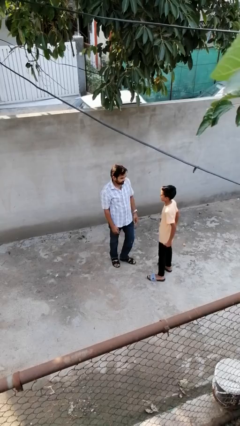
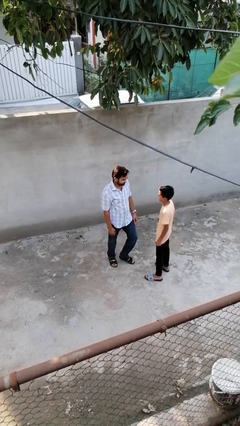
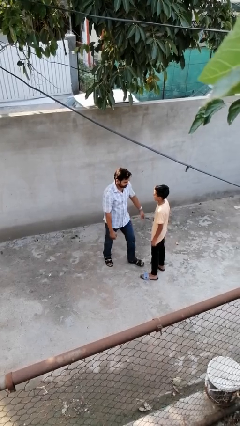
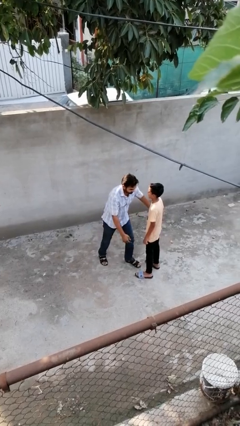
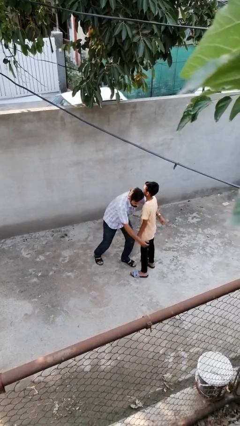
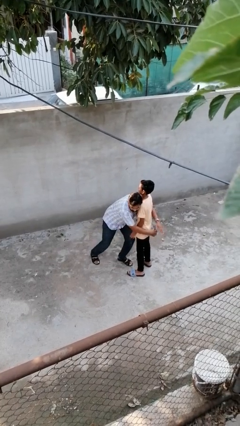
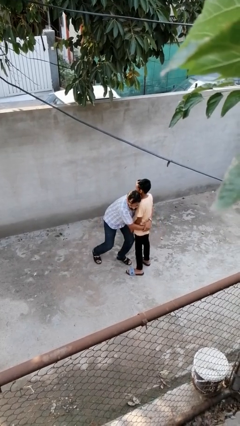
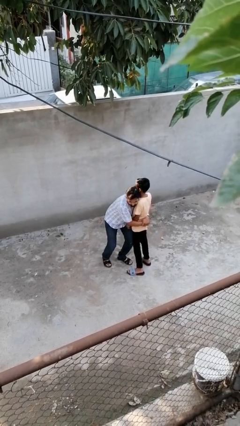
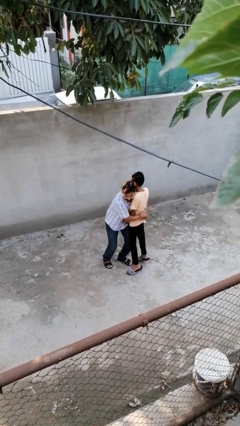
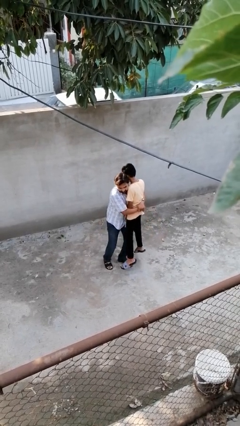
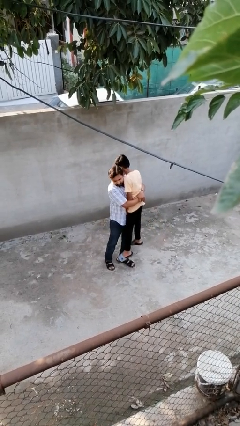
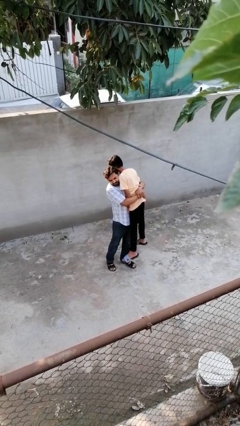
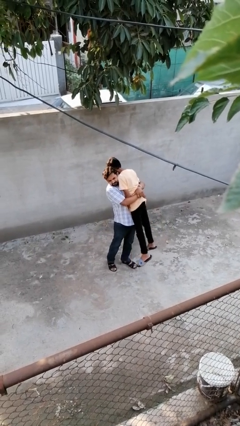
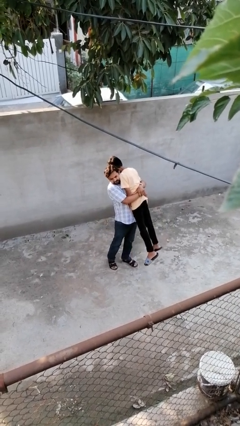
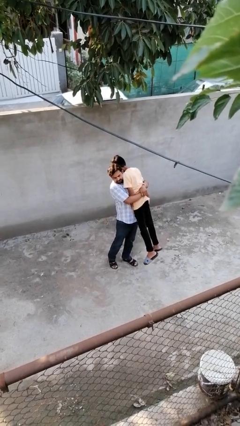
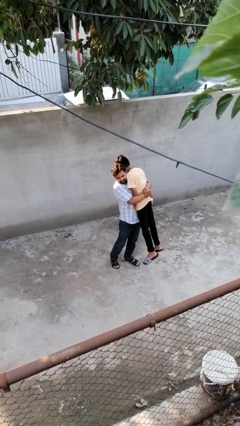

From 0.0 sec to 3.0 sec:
person picks up person

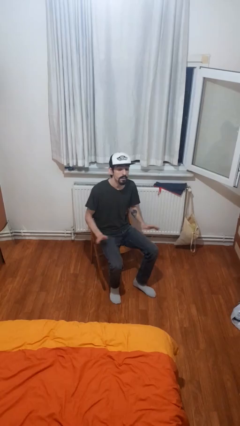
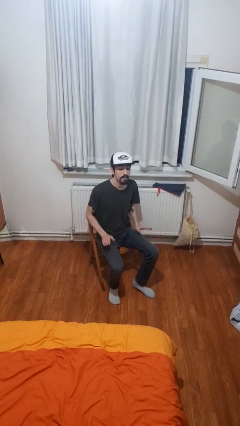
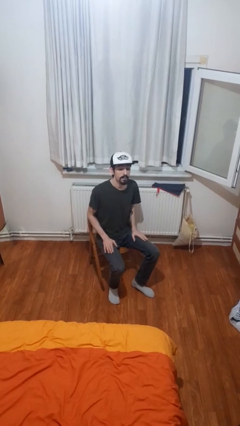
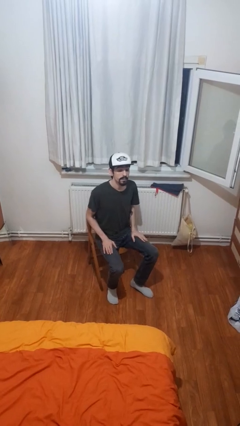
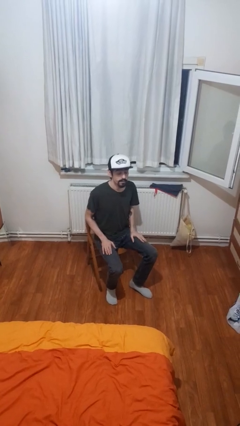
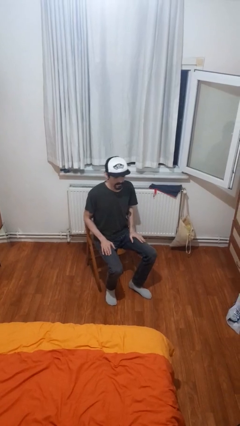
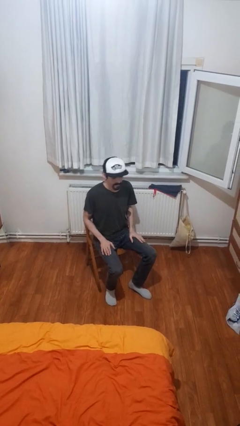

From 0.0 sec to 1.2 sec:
person slaps hands on thighs

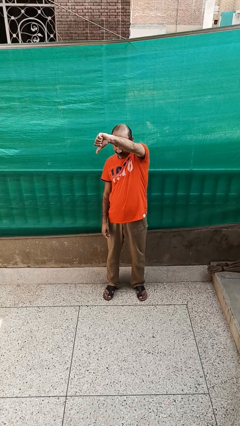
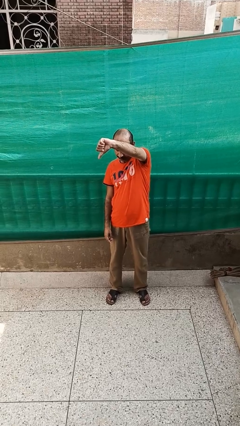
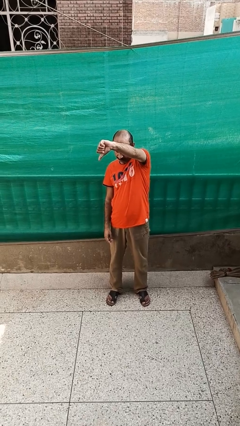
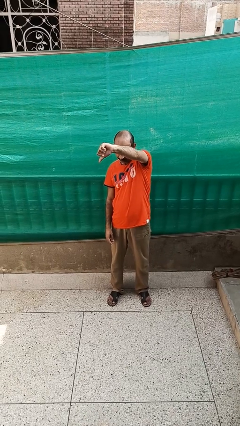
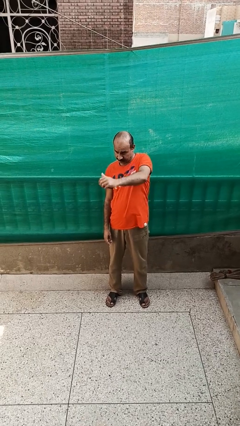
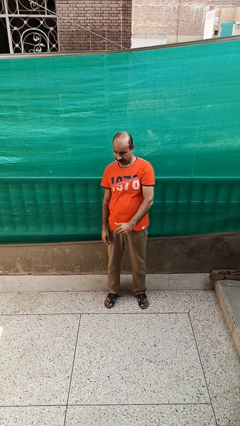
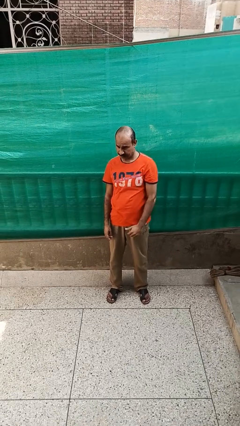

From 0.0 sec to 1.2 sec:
person gestures thumbs down

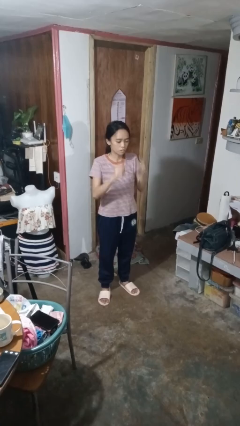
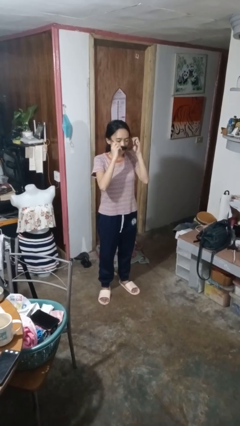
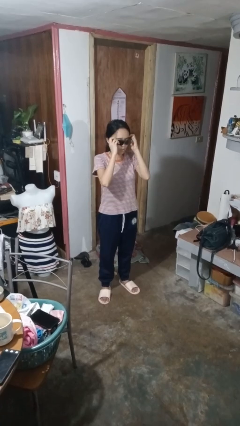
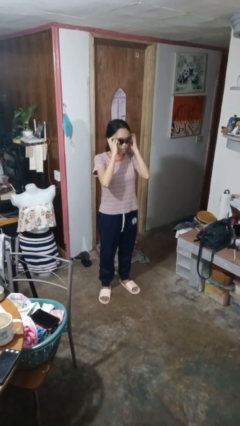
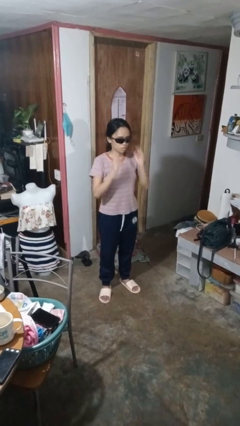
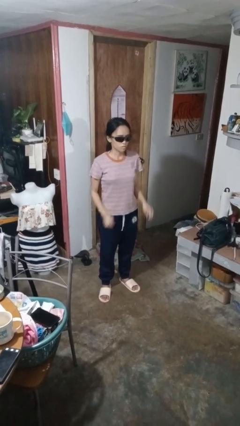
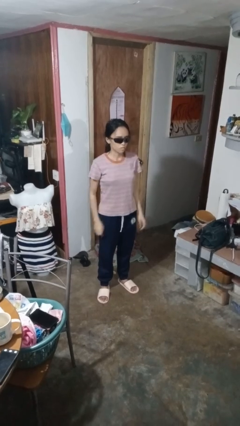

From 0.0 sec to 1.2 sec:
person puts on sunglasses

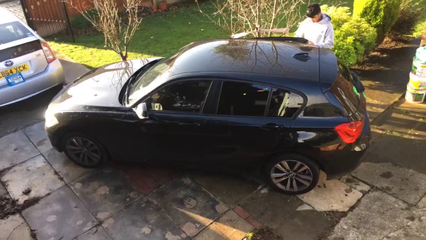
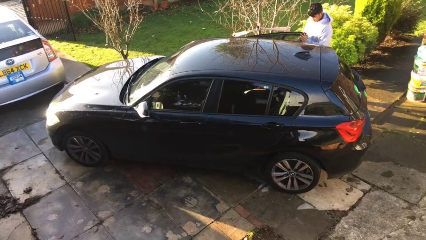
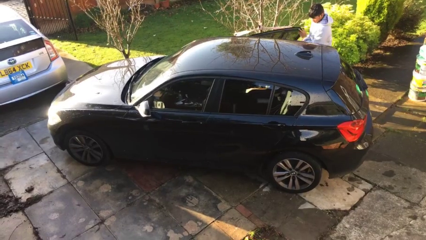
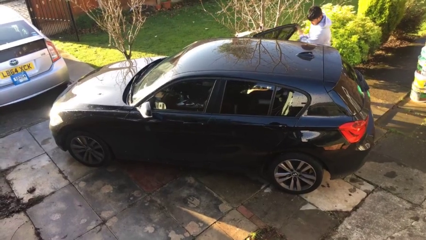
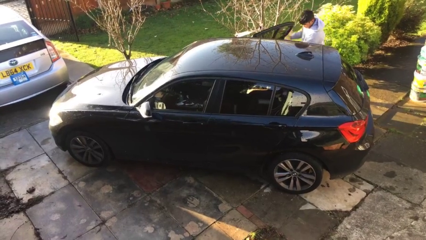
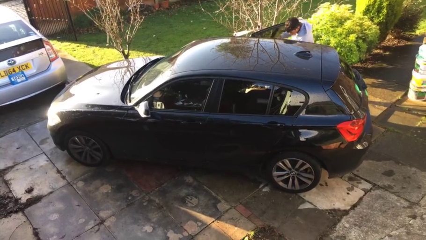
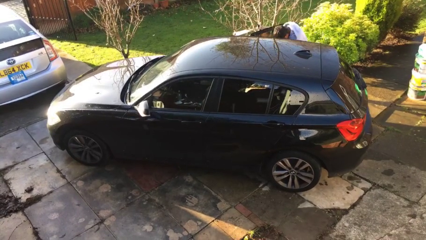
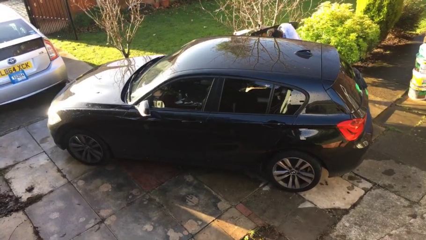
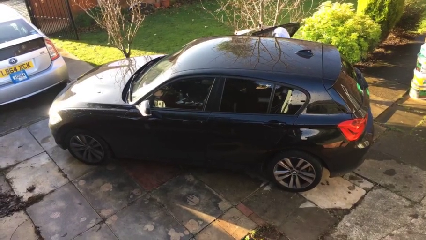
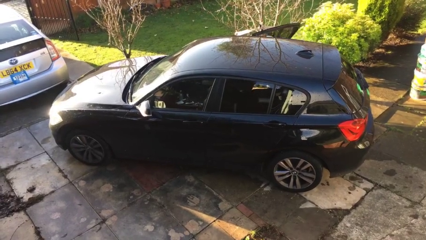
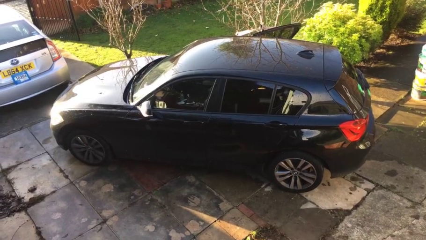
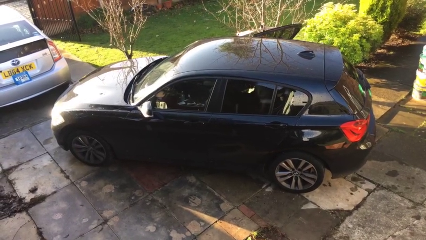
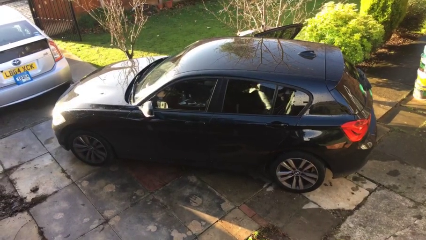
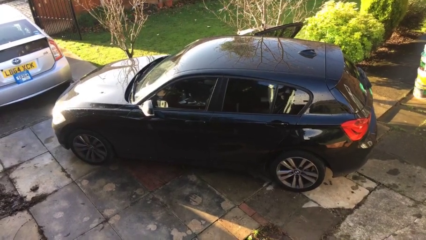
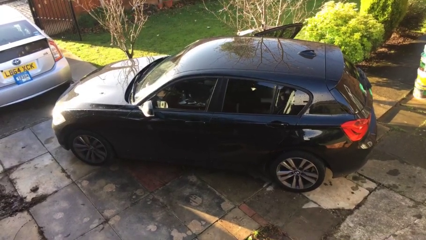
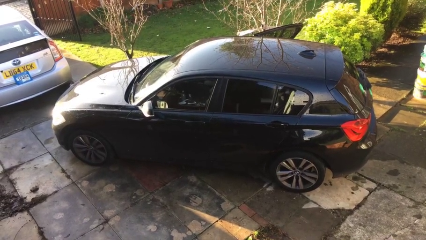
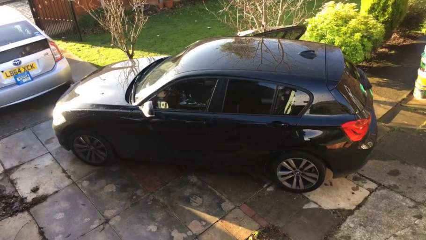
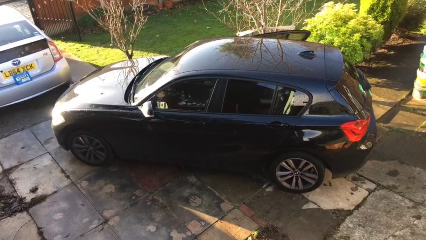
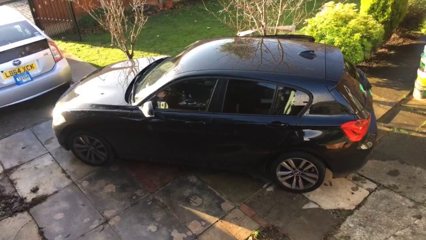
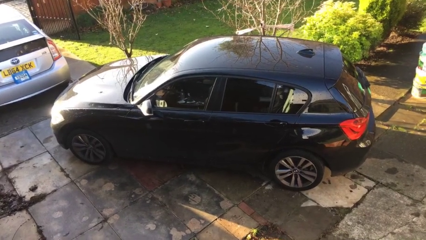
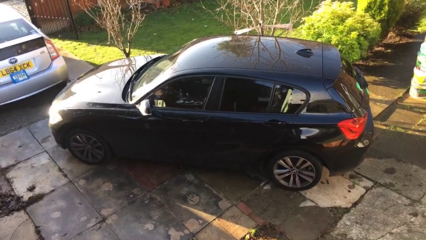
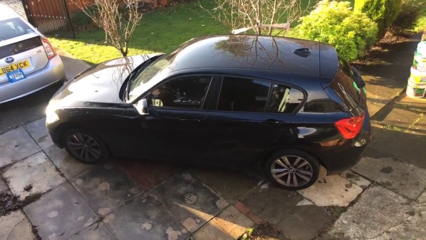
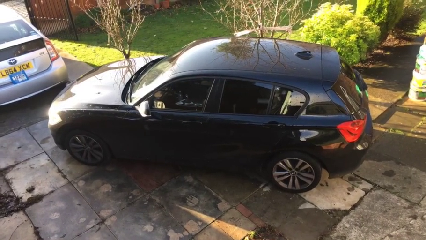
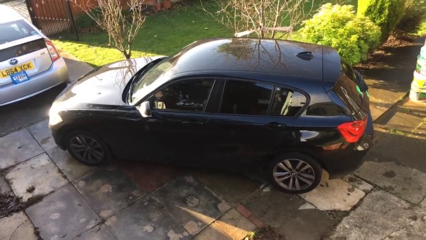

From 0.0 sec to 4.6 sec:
car picks up person

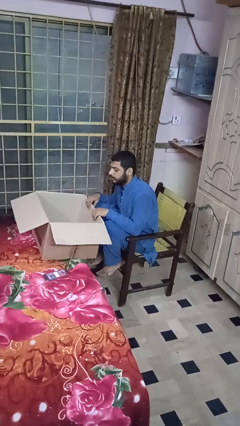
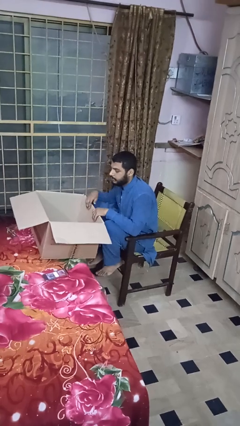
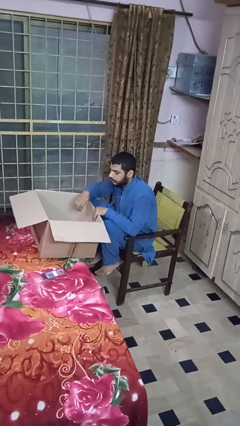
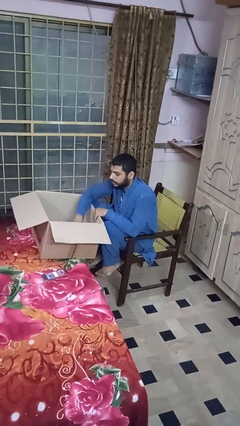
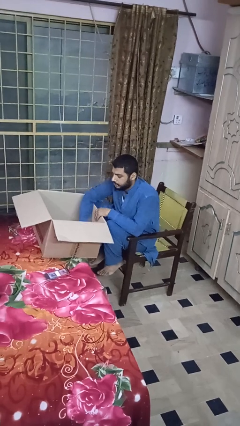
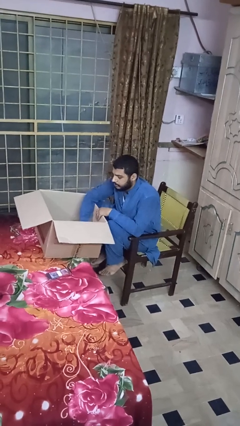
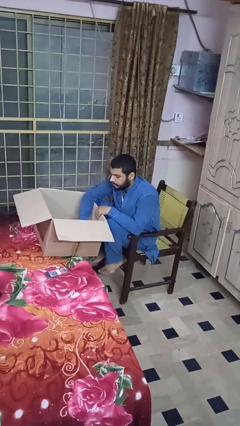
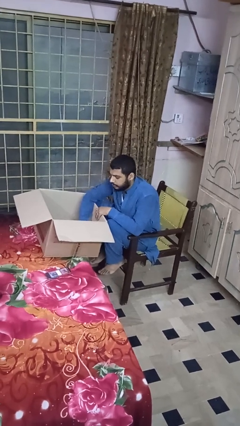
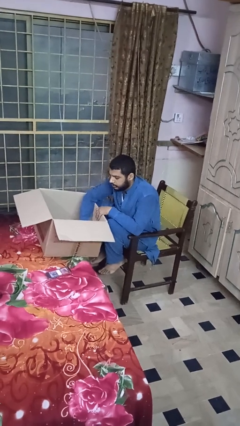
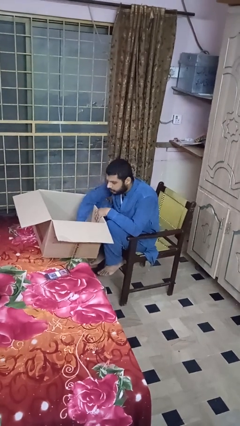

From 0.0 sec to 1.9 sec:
person searches in box

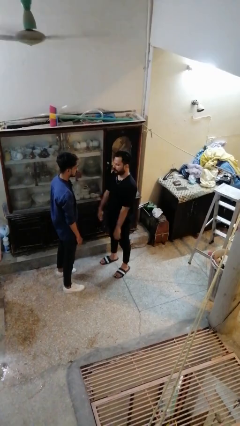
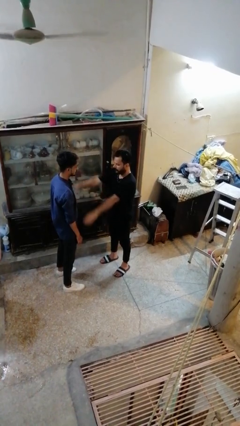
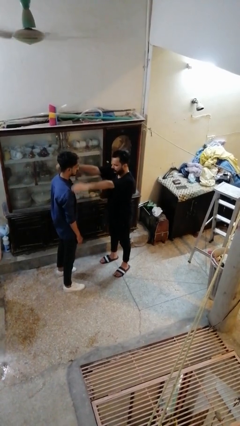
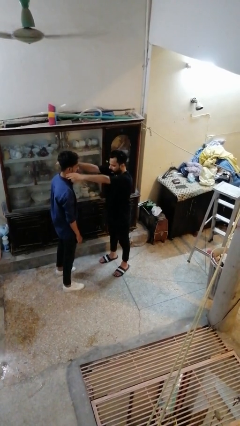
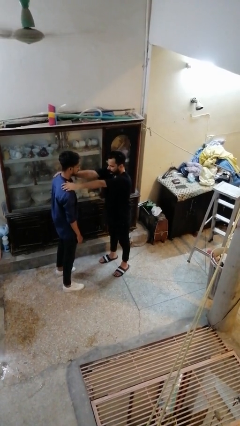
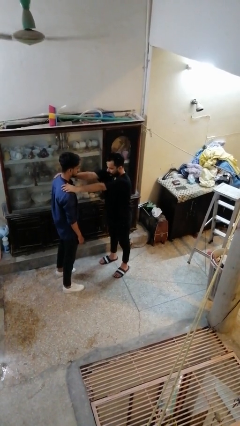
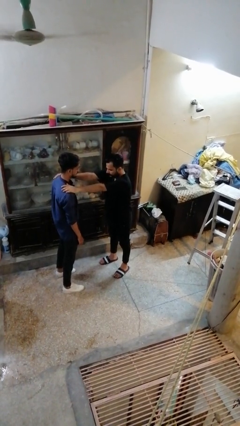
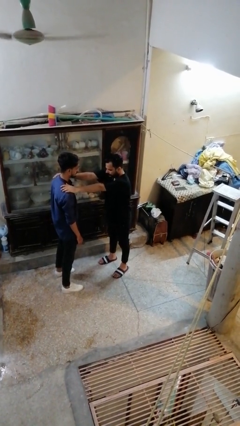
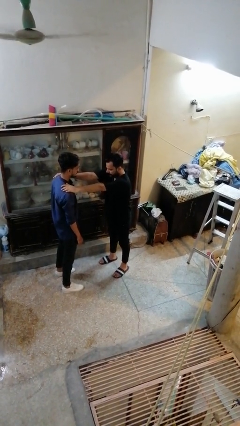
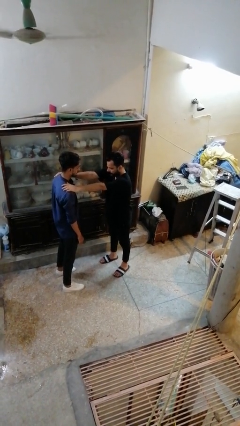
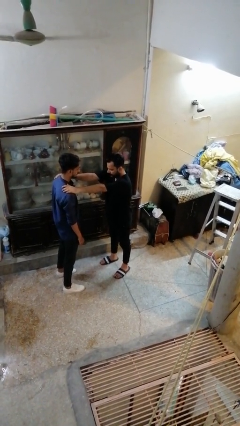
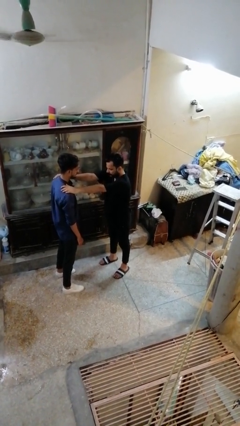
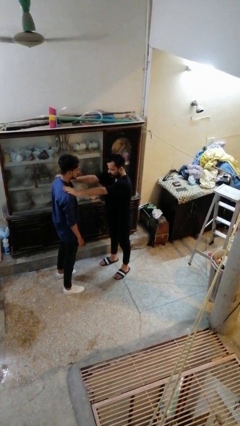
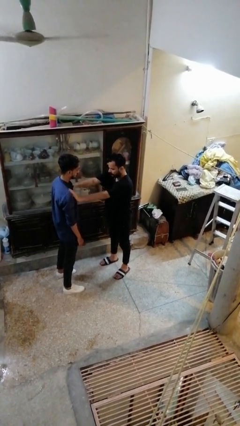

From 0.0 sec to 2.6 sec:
person pounds shoulders of person

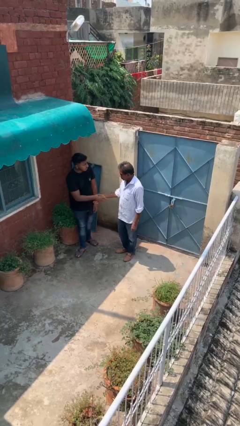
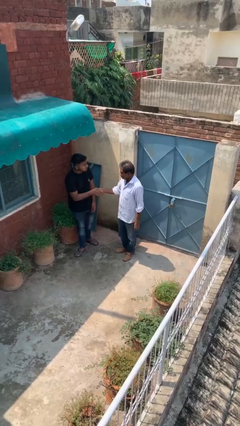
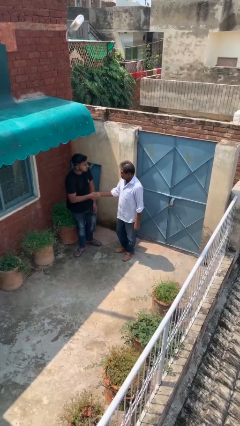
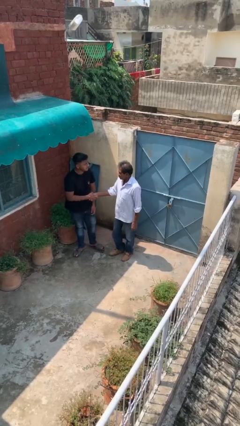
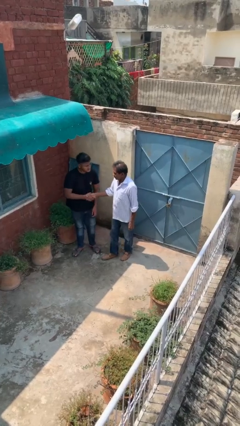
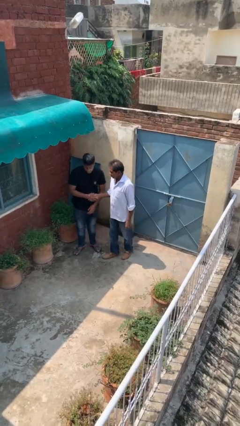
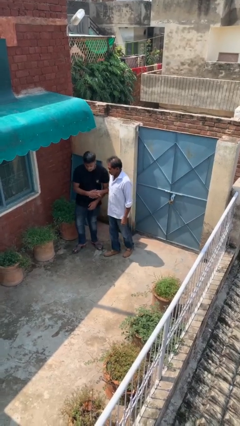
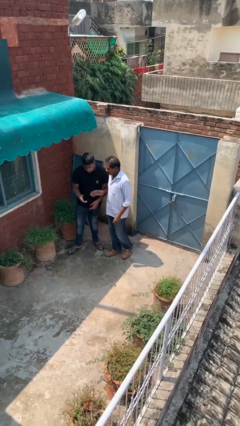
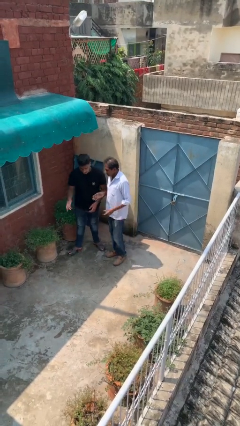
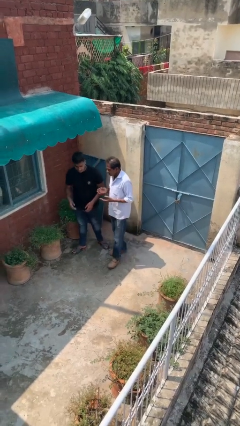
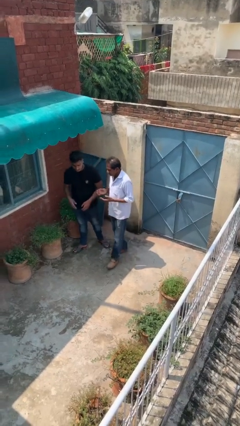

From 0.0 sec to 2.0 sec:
person shakes hand
